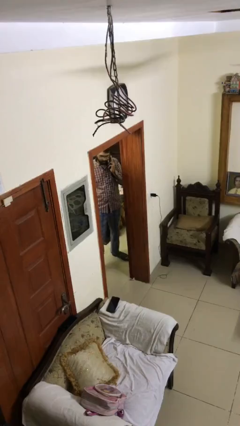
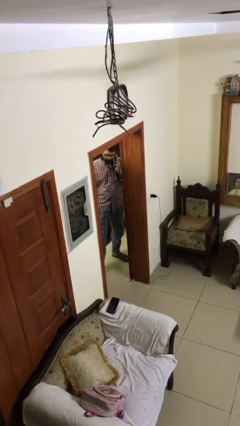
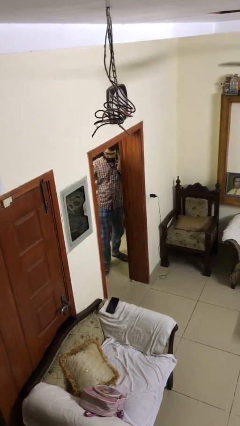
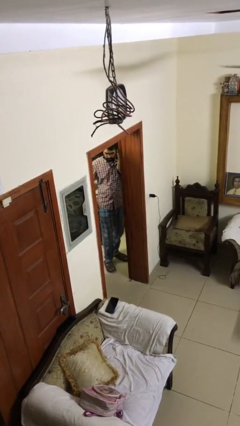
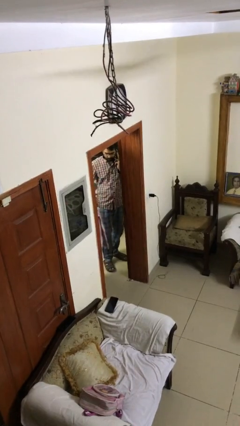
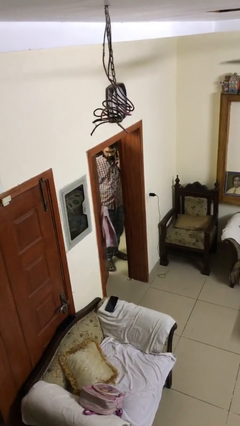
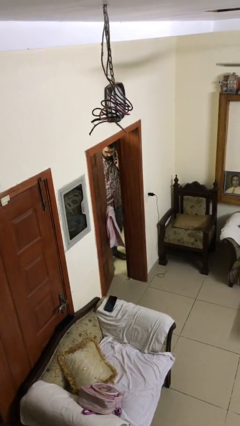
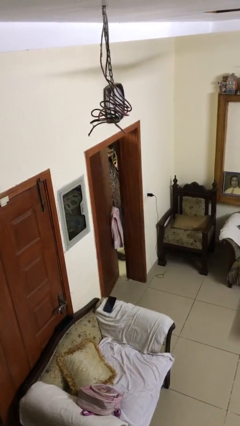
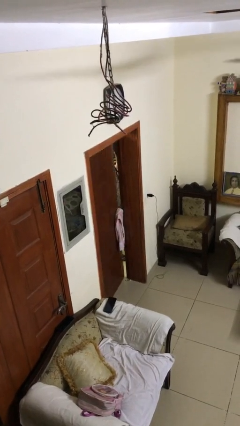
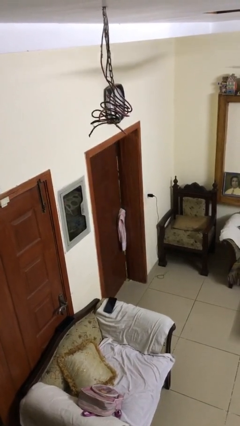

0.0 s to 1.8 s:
person closes facility door

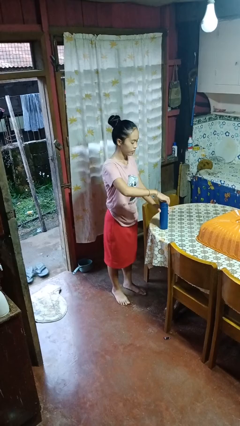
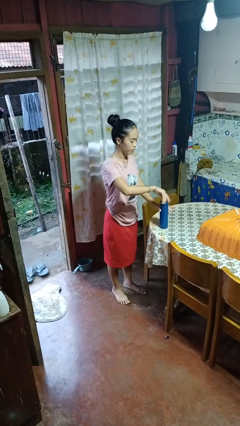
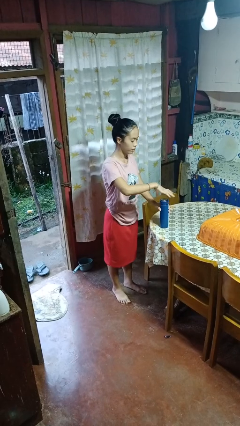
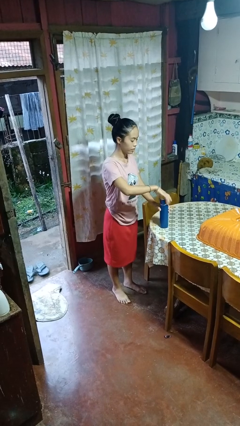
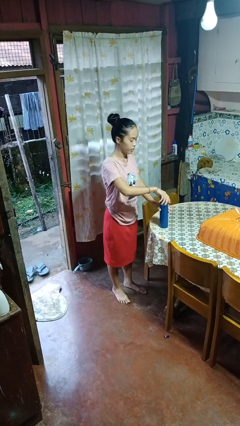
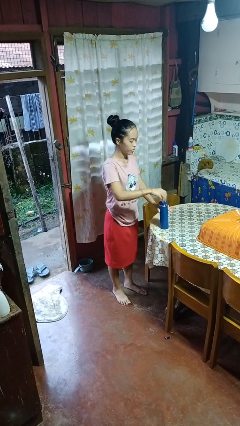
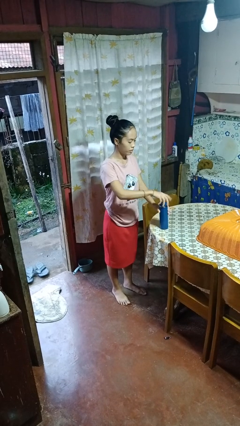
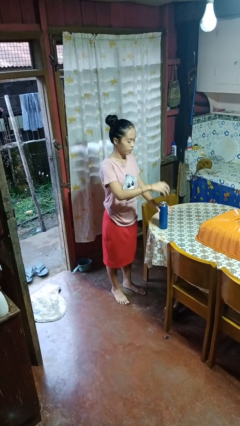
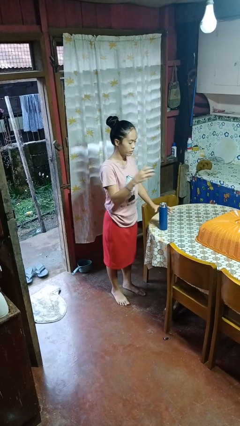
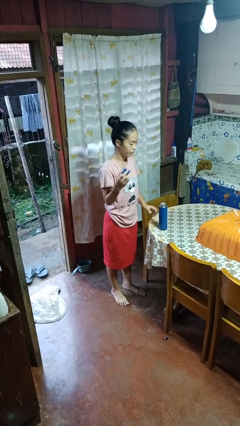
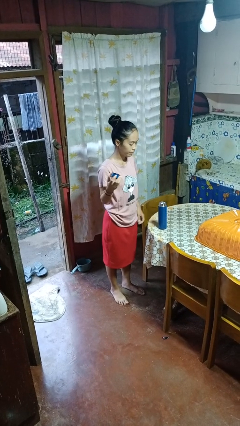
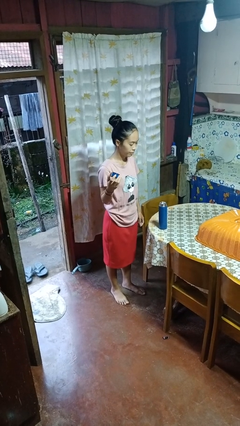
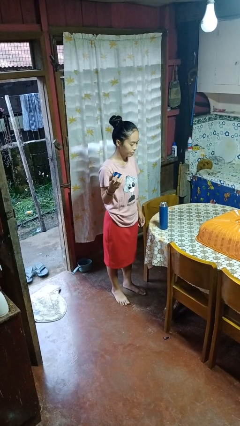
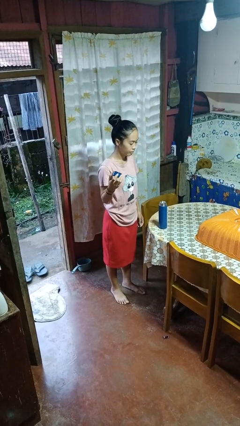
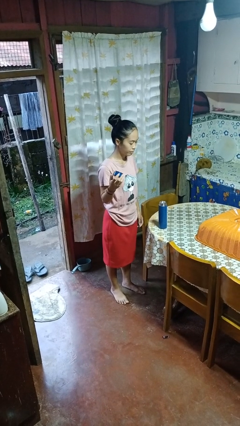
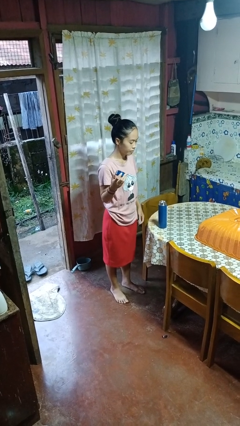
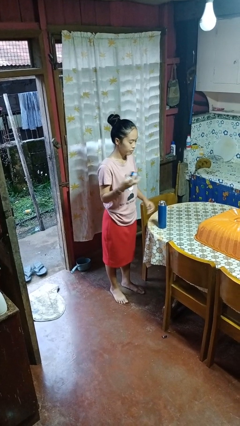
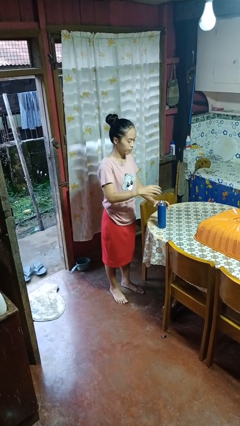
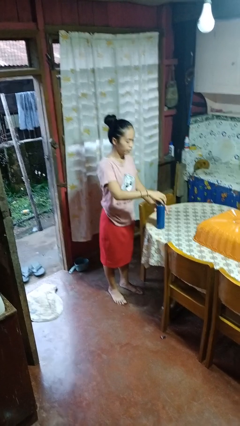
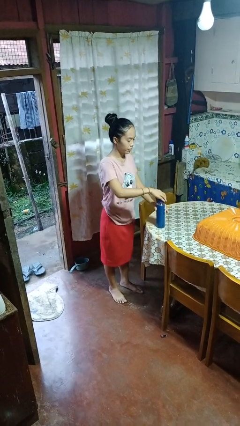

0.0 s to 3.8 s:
person opens jar

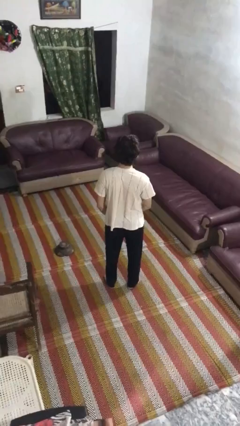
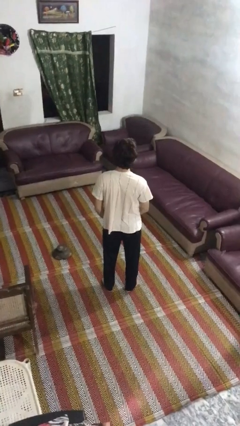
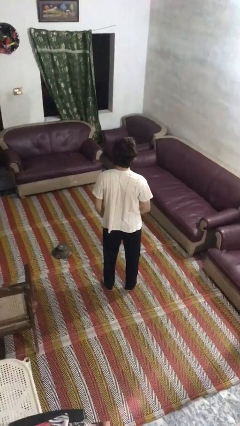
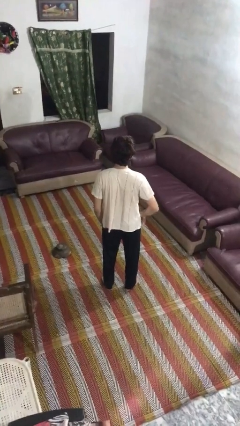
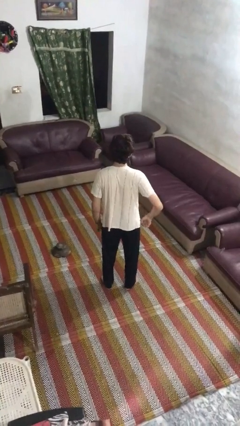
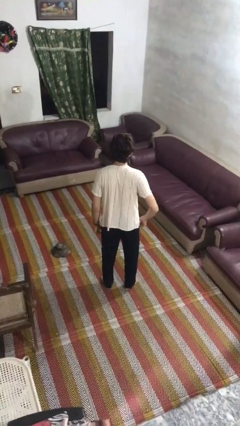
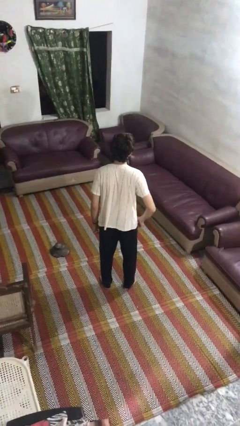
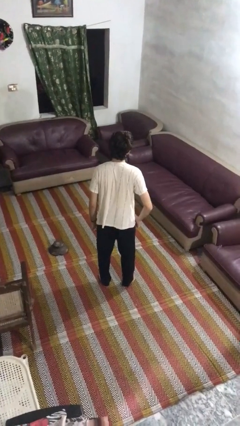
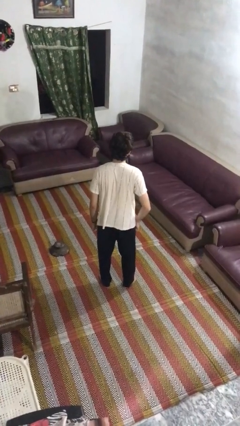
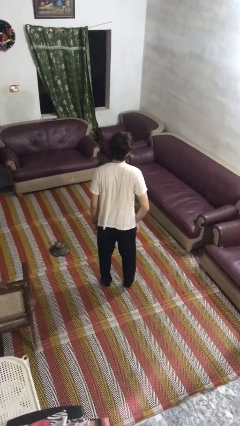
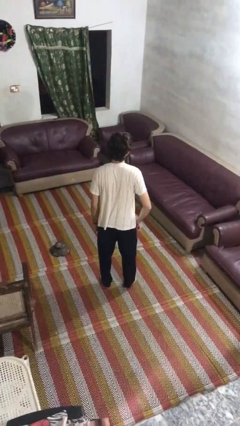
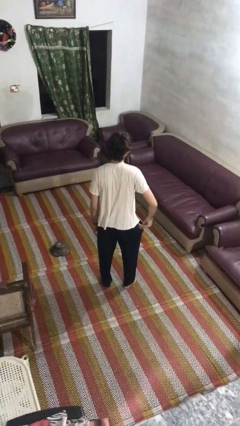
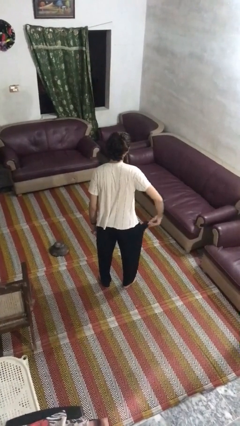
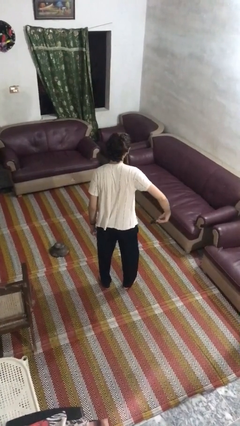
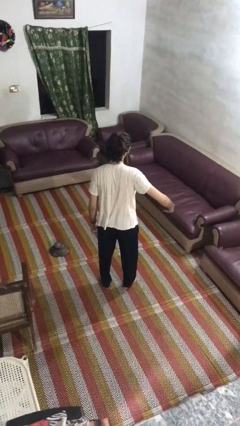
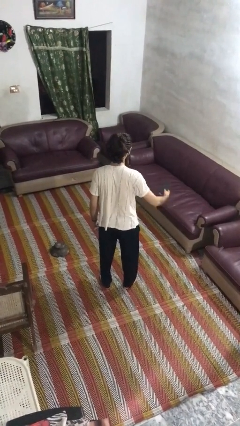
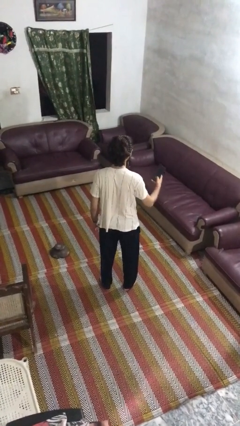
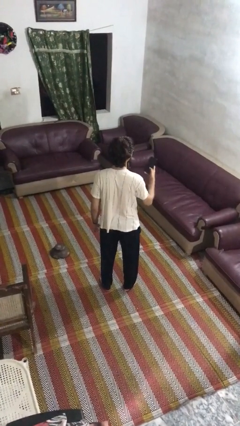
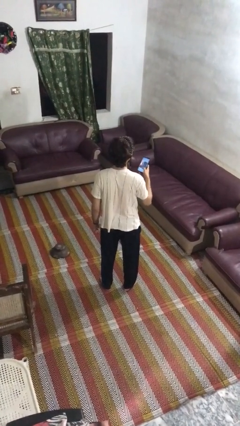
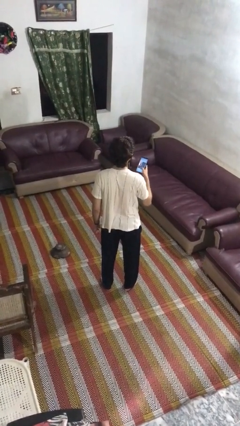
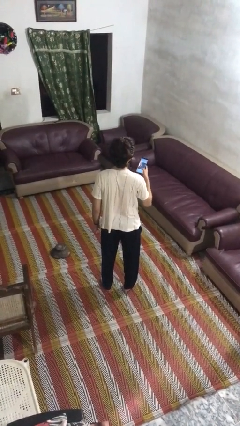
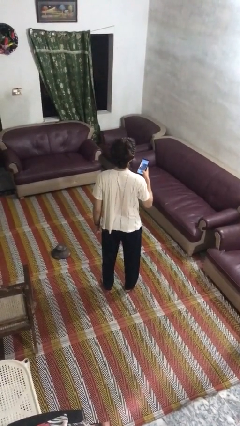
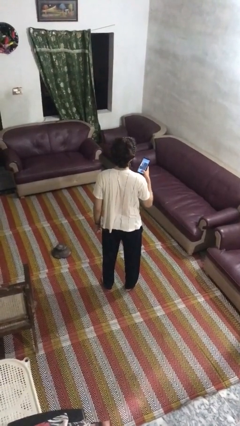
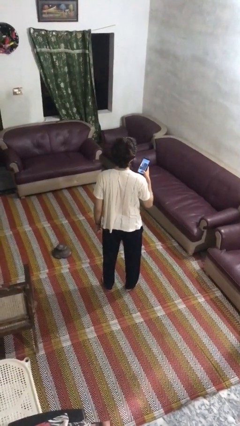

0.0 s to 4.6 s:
person takes phone from pocket

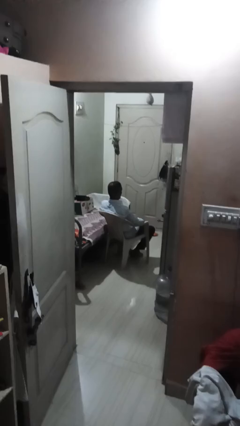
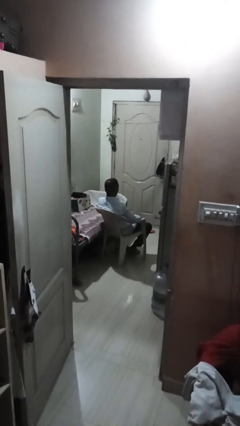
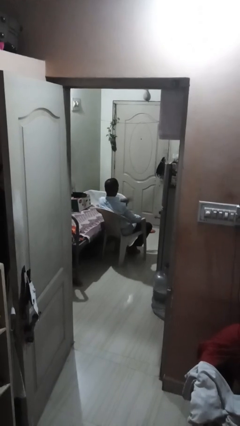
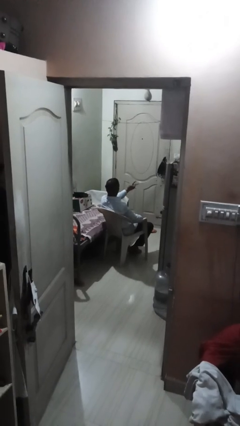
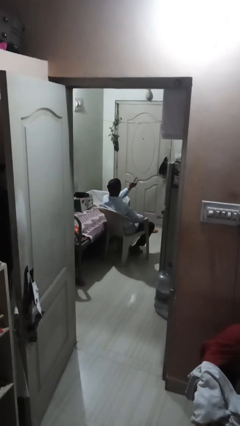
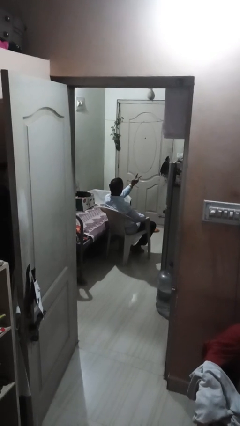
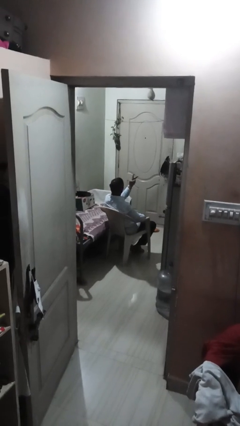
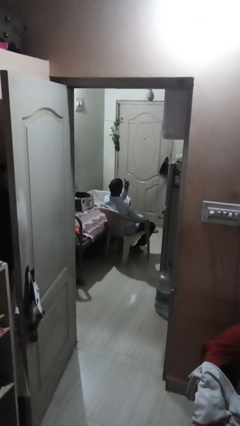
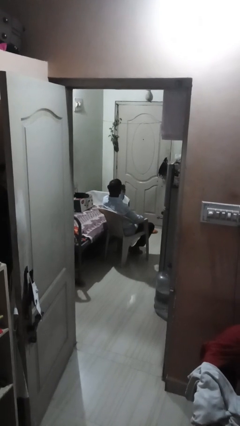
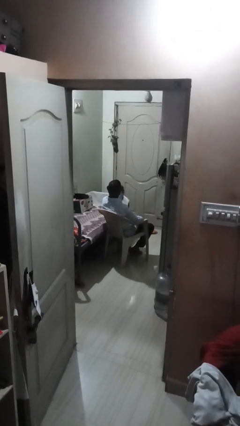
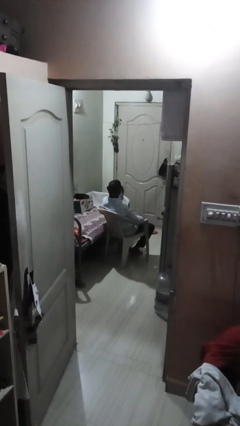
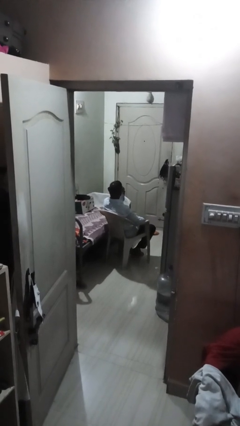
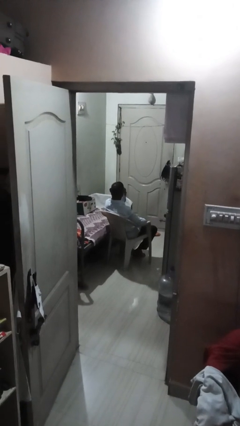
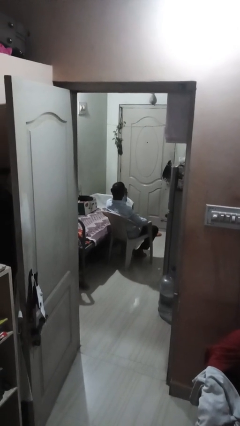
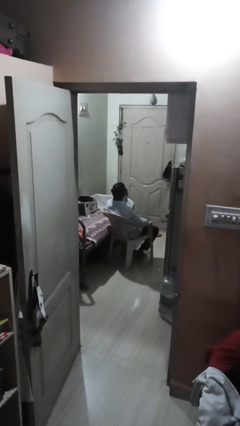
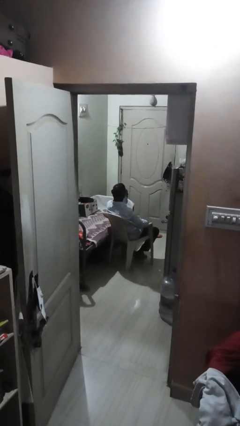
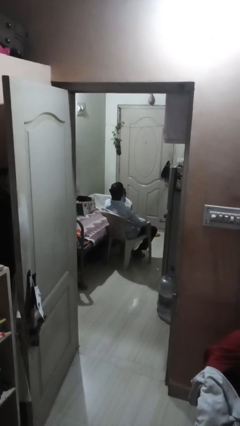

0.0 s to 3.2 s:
person gestures watch closely

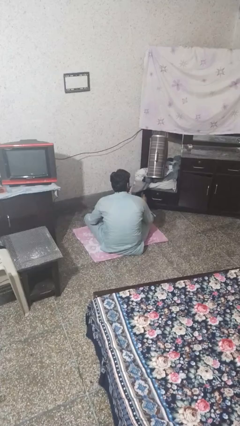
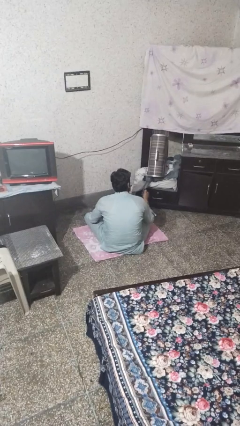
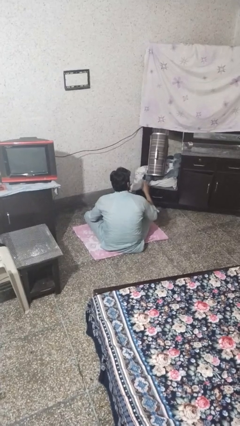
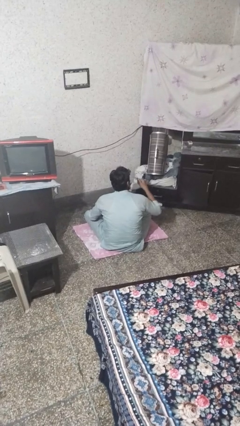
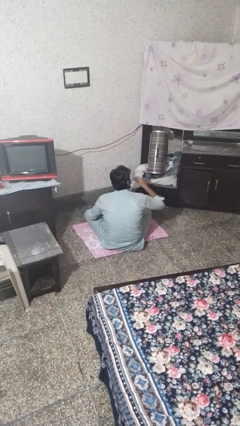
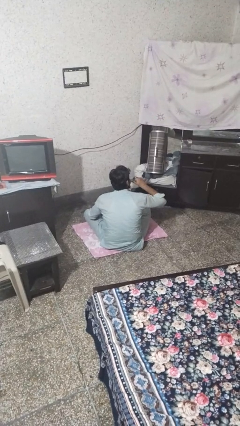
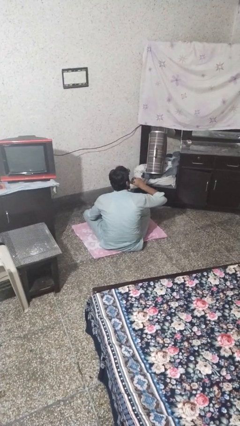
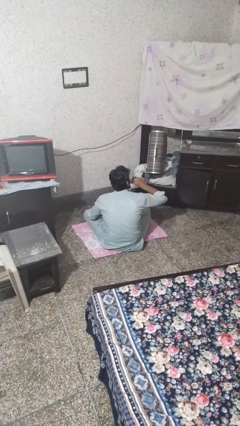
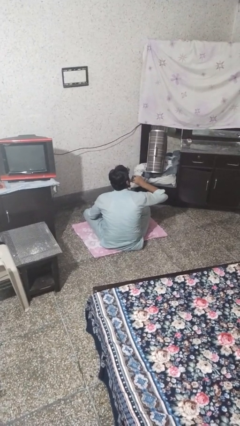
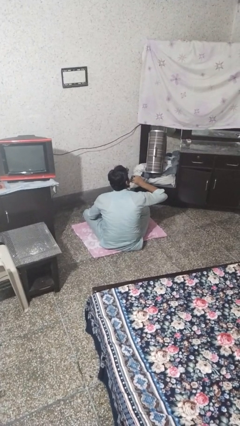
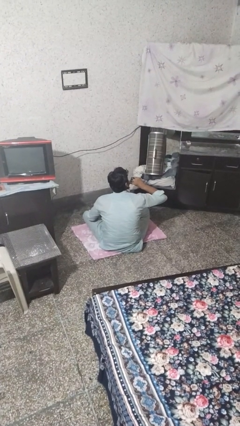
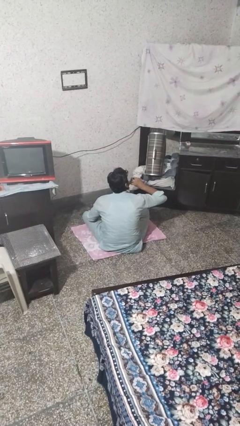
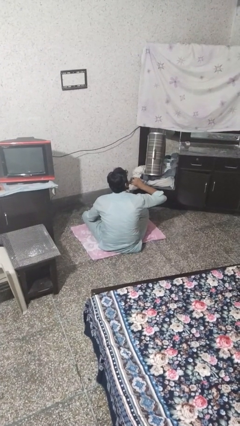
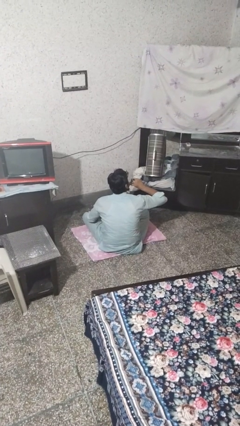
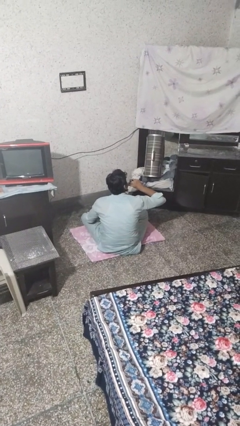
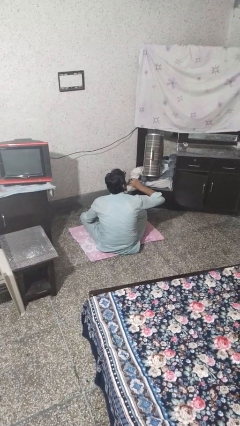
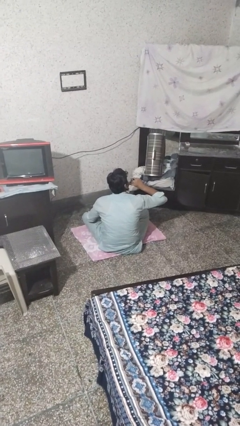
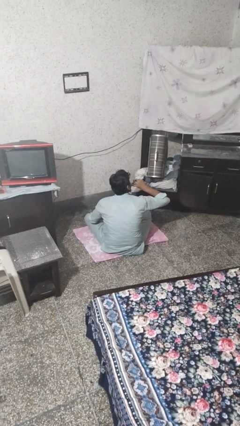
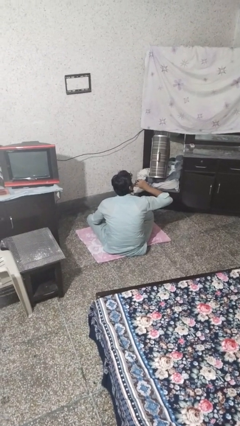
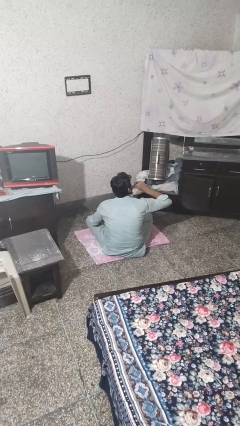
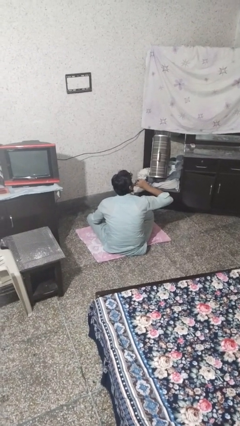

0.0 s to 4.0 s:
person vapes
